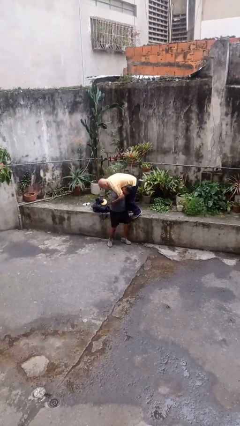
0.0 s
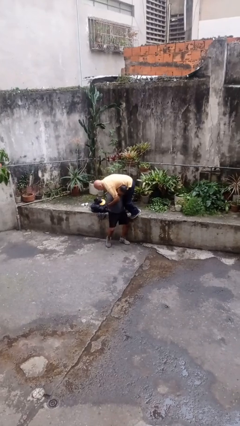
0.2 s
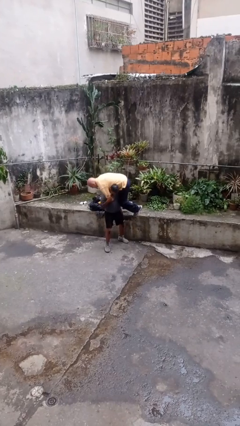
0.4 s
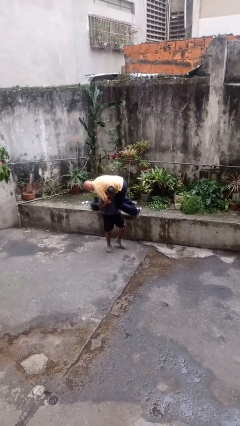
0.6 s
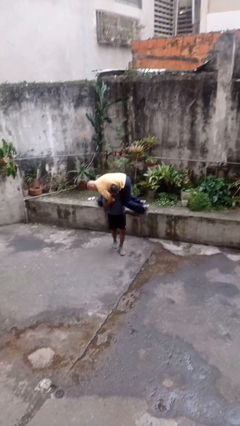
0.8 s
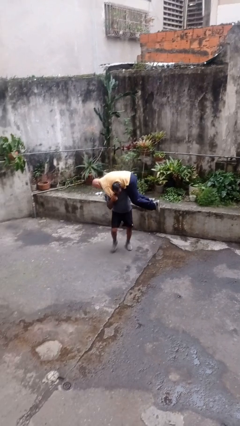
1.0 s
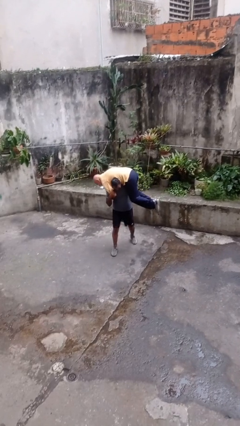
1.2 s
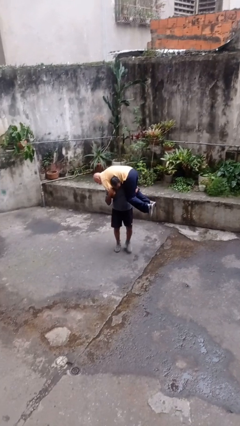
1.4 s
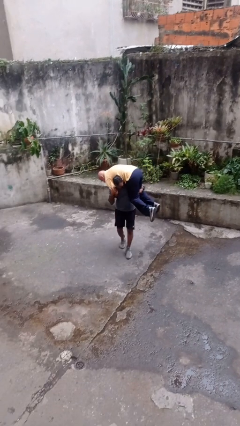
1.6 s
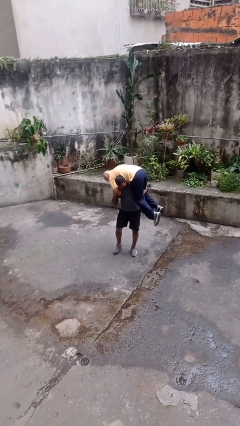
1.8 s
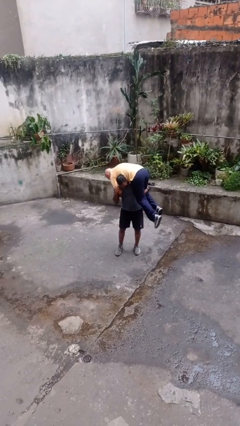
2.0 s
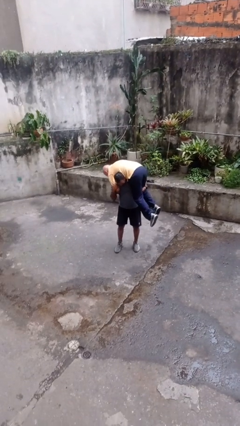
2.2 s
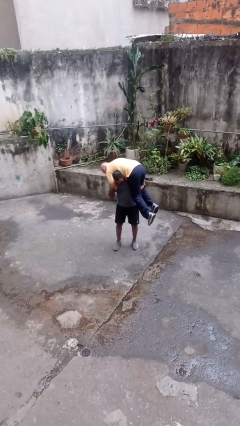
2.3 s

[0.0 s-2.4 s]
person carries person over shoulder

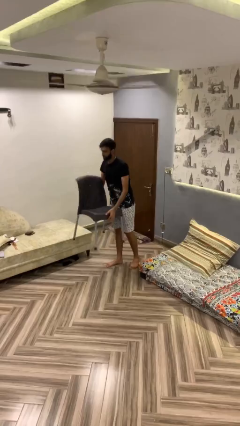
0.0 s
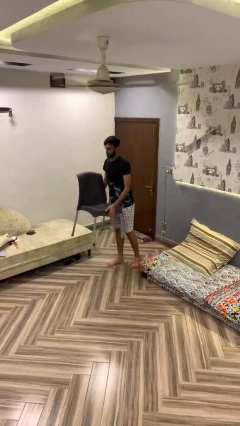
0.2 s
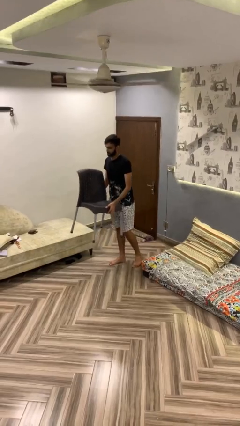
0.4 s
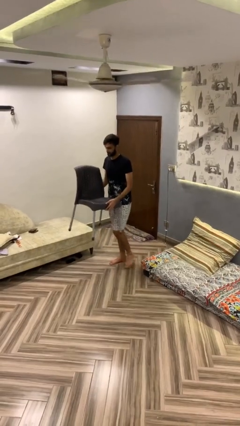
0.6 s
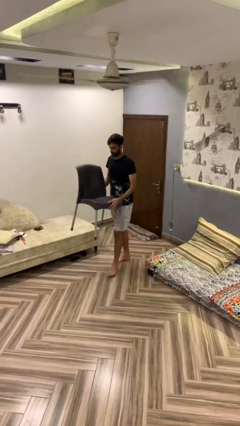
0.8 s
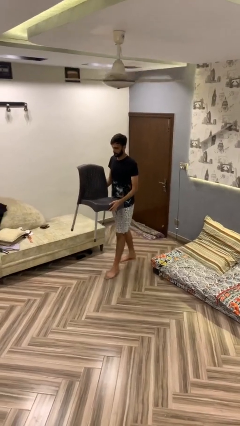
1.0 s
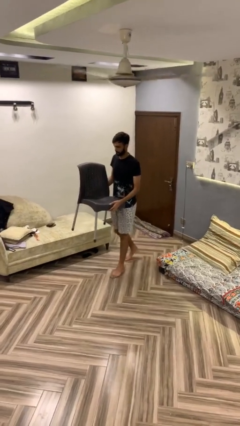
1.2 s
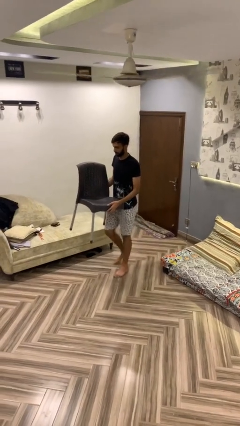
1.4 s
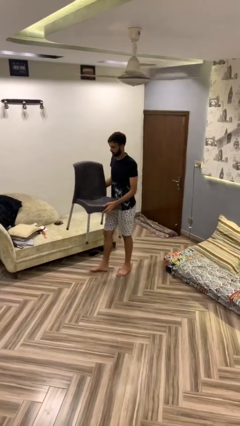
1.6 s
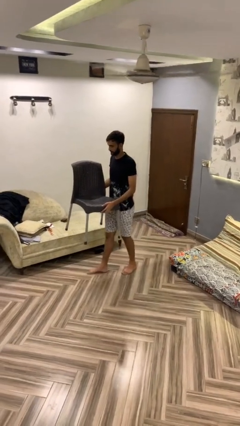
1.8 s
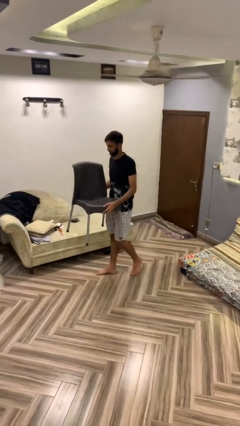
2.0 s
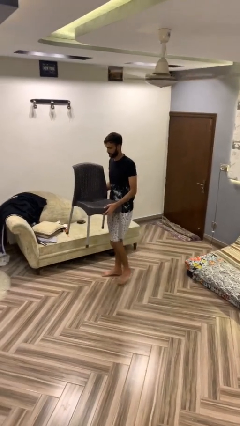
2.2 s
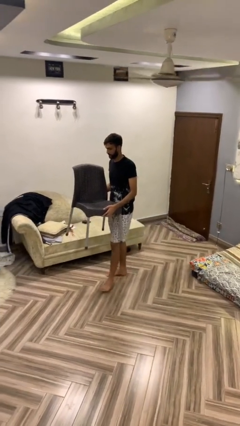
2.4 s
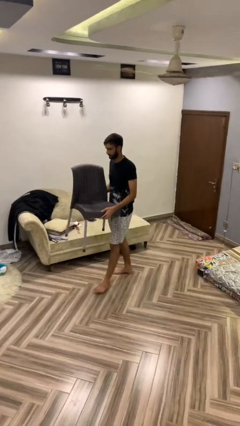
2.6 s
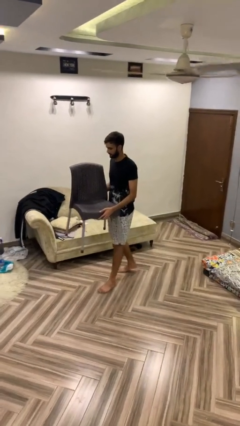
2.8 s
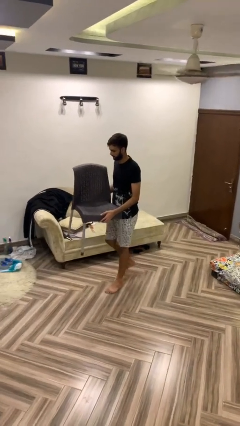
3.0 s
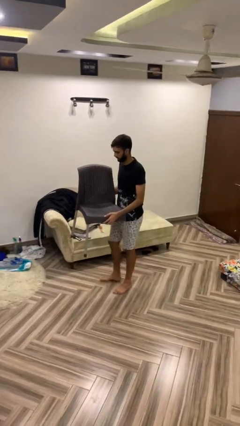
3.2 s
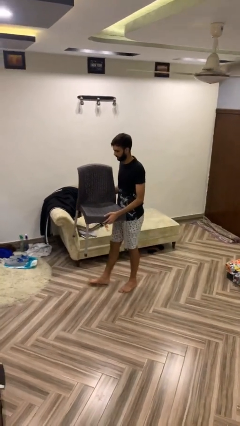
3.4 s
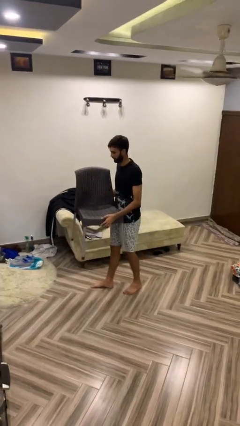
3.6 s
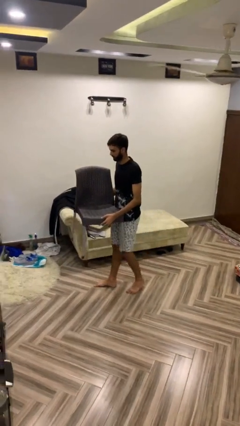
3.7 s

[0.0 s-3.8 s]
person carries heavy object

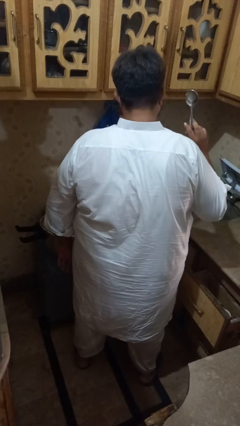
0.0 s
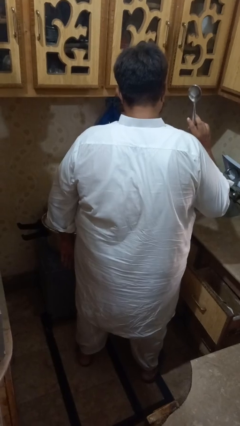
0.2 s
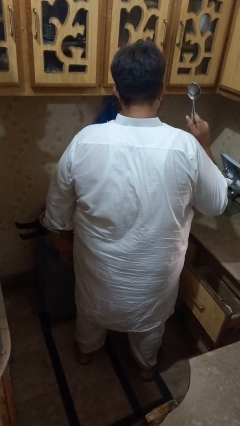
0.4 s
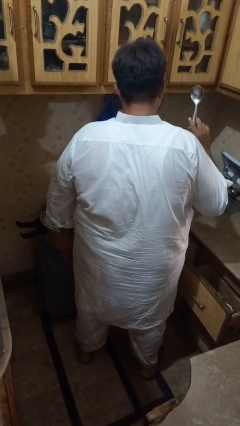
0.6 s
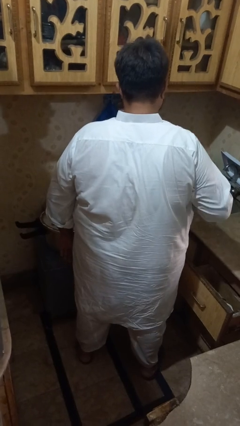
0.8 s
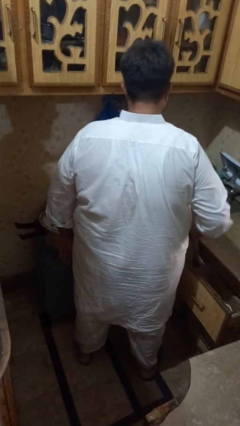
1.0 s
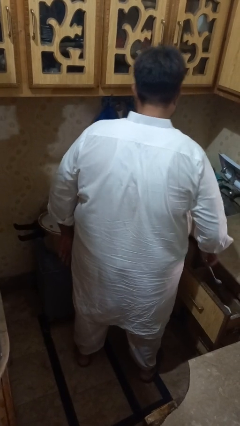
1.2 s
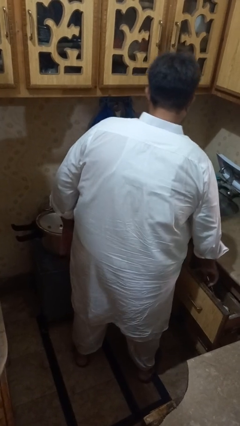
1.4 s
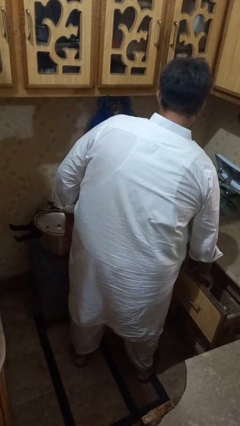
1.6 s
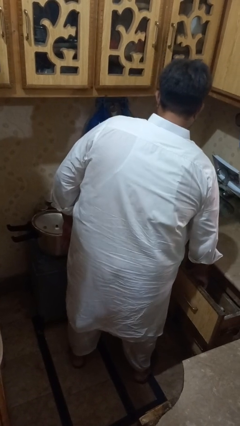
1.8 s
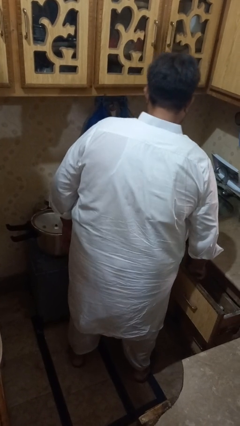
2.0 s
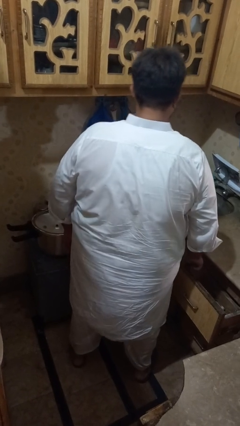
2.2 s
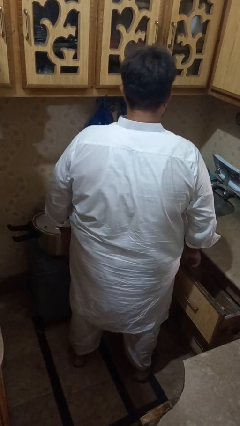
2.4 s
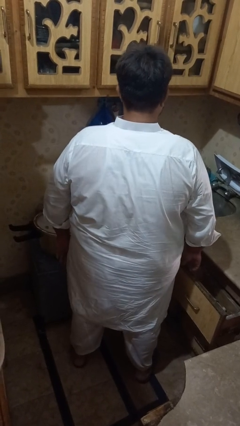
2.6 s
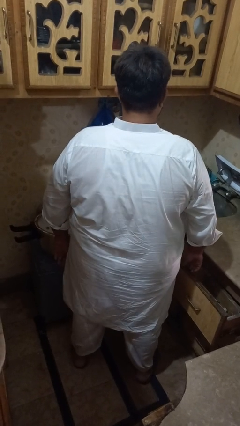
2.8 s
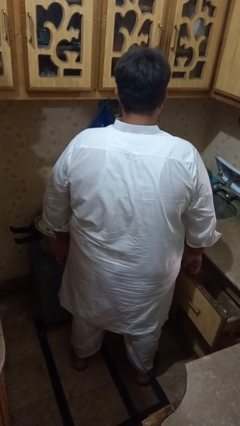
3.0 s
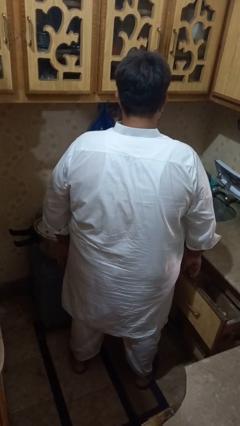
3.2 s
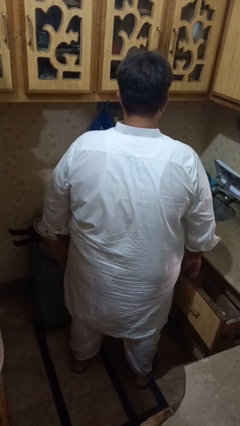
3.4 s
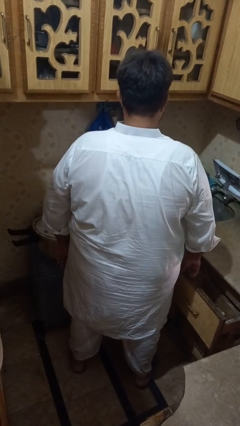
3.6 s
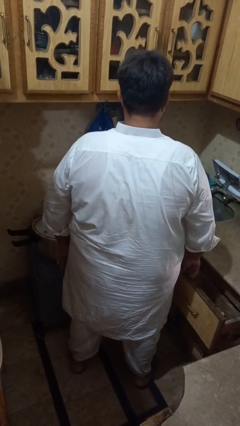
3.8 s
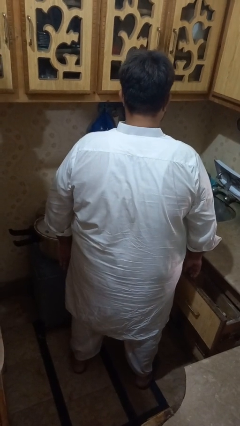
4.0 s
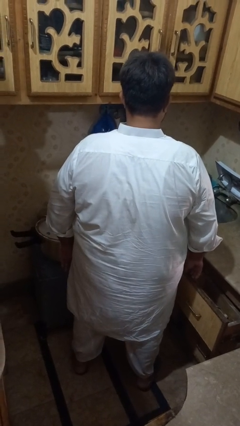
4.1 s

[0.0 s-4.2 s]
person puts object into kitchen drawer

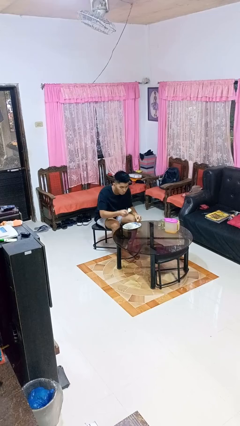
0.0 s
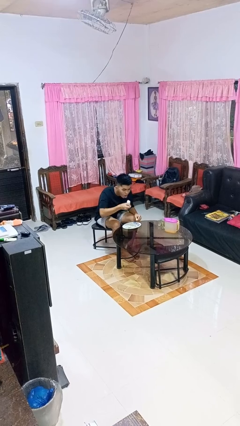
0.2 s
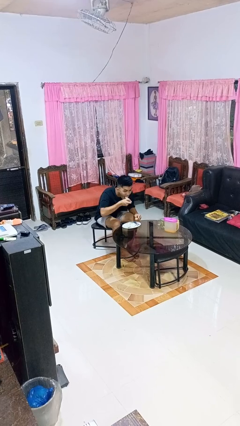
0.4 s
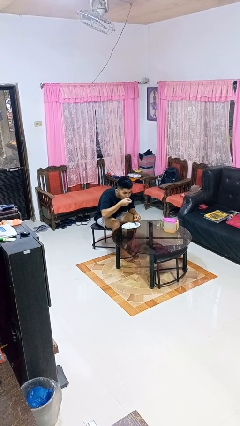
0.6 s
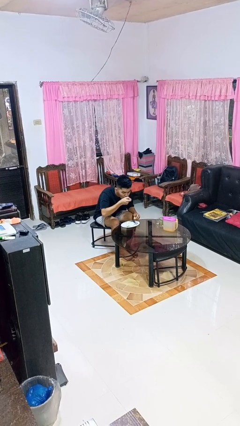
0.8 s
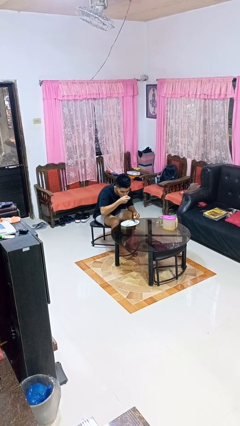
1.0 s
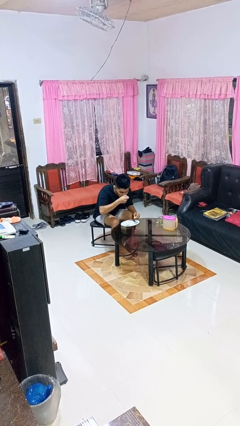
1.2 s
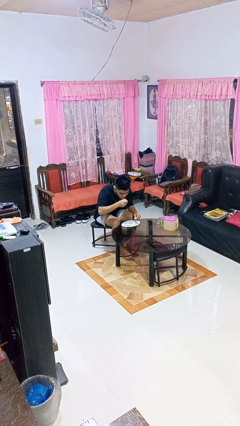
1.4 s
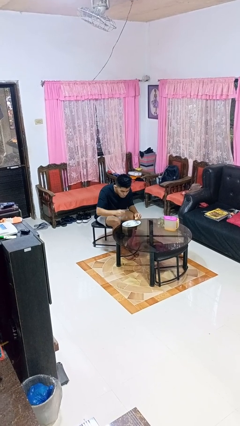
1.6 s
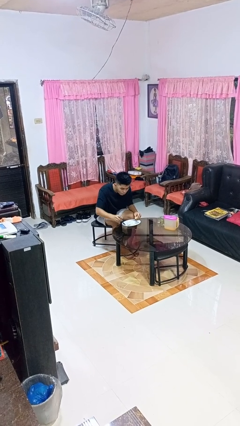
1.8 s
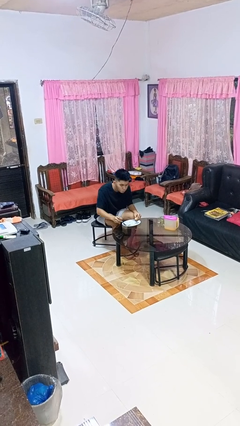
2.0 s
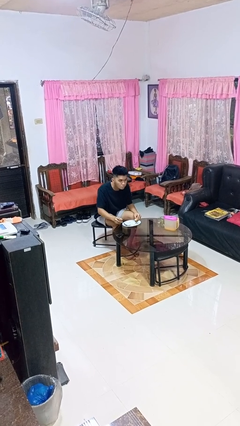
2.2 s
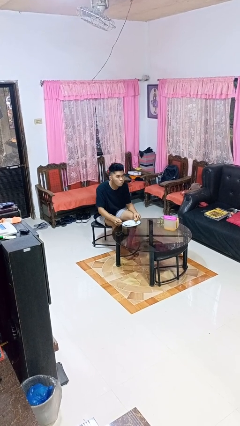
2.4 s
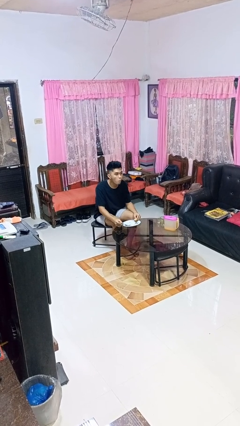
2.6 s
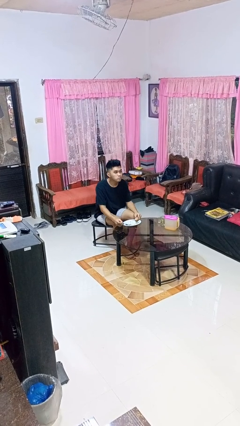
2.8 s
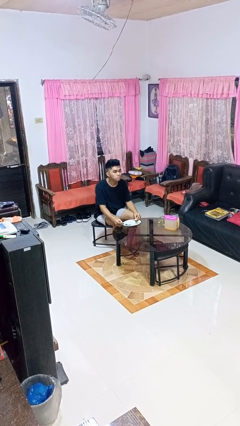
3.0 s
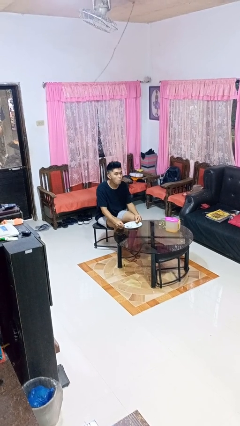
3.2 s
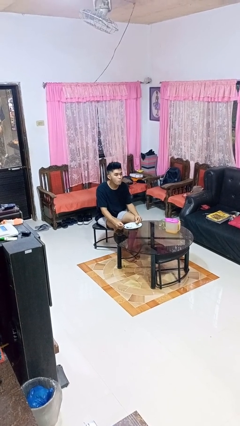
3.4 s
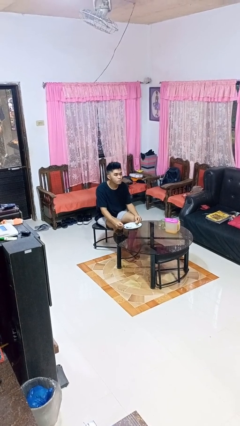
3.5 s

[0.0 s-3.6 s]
person eats with utensil

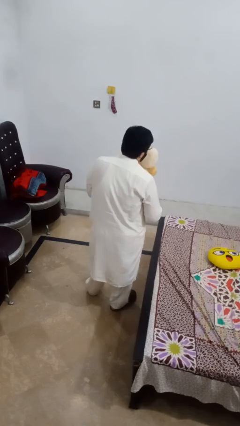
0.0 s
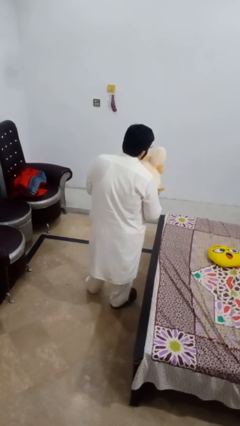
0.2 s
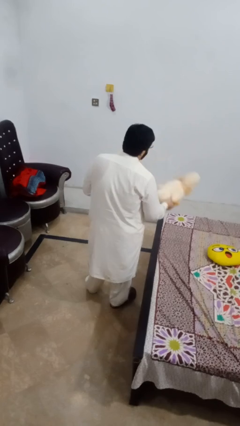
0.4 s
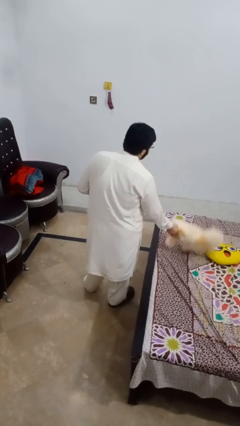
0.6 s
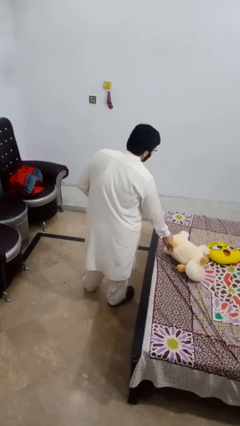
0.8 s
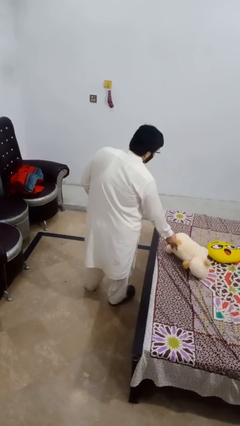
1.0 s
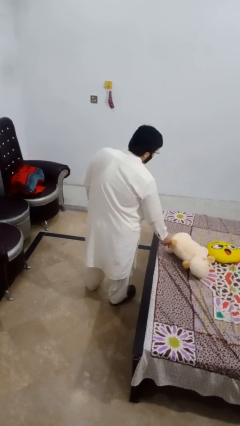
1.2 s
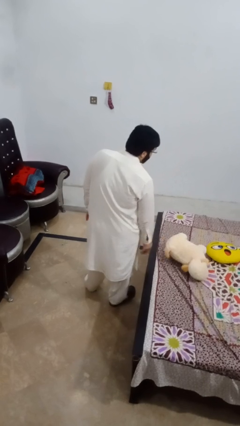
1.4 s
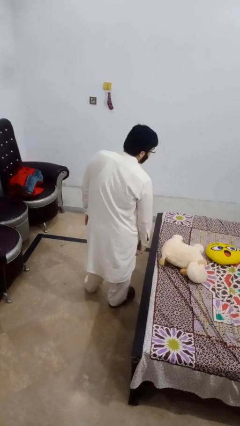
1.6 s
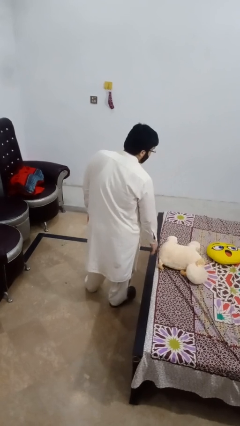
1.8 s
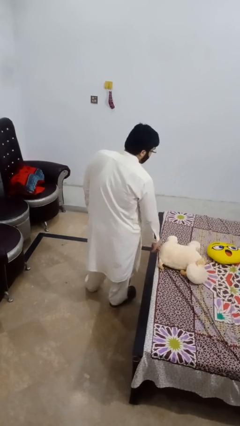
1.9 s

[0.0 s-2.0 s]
person puts down object on bed

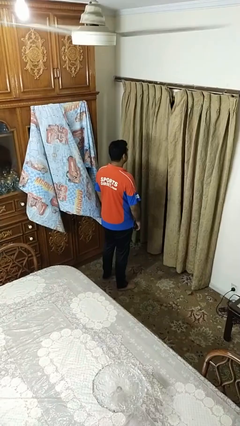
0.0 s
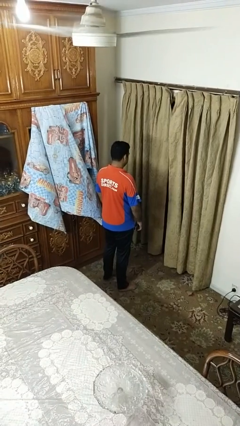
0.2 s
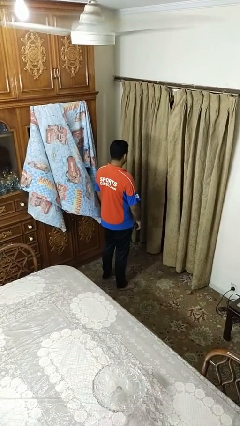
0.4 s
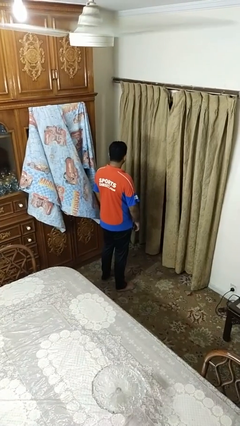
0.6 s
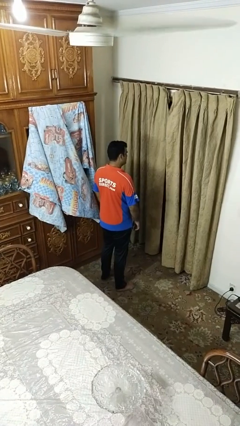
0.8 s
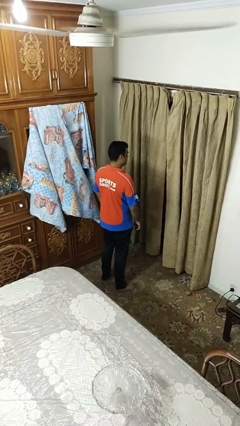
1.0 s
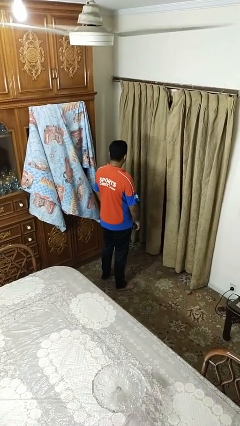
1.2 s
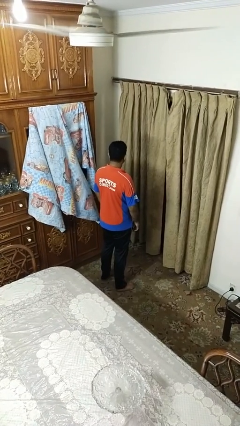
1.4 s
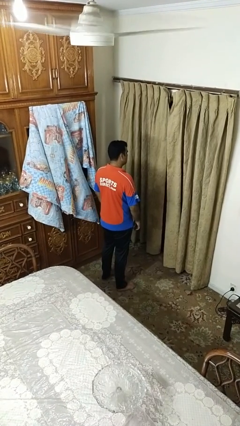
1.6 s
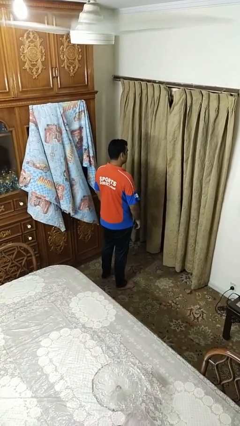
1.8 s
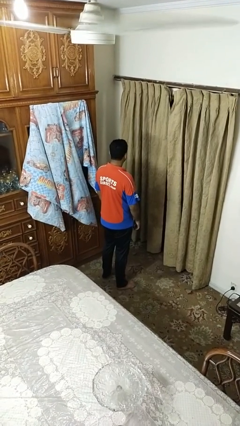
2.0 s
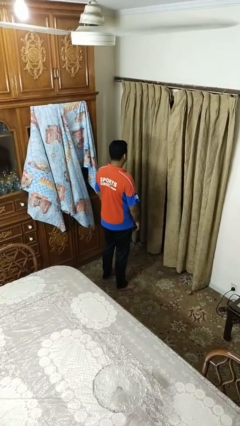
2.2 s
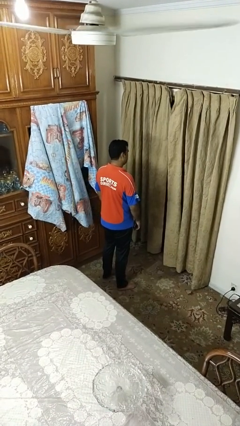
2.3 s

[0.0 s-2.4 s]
person shakes head
